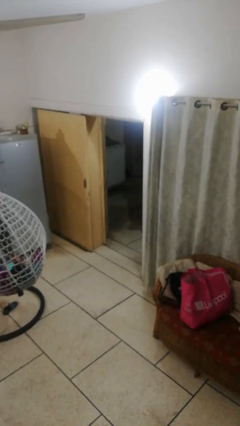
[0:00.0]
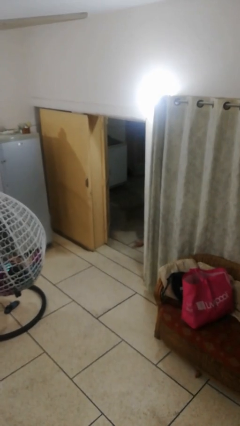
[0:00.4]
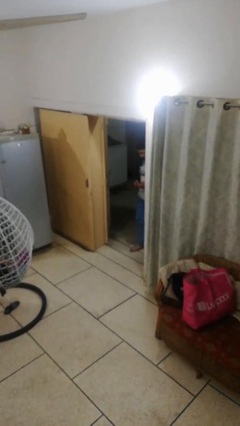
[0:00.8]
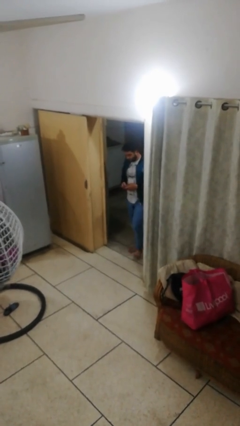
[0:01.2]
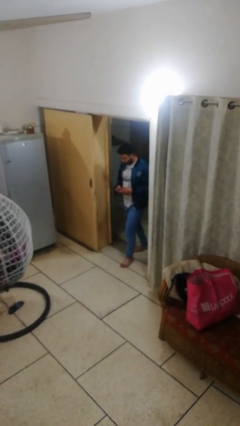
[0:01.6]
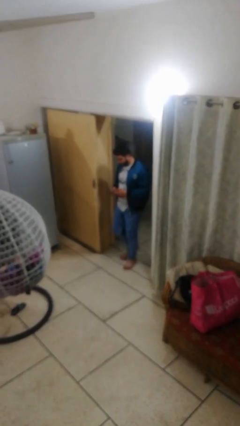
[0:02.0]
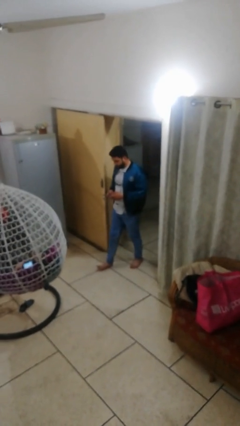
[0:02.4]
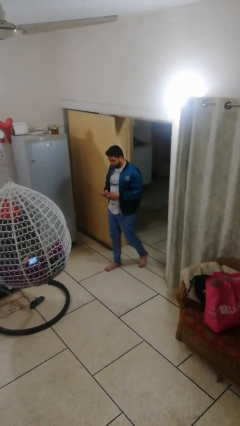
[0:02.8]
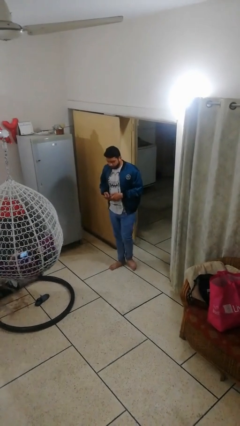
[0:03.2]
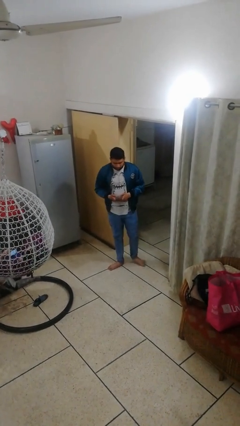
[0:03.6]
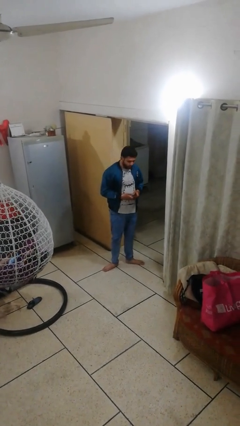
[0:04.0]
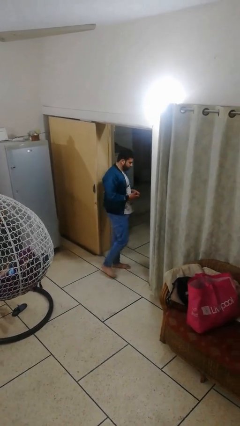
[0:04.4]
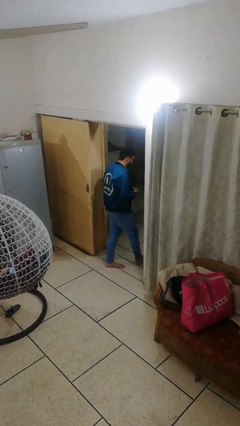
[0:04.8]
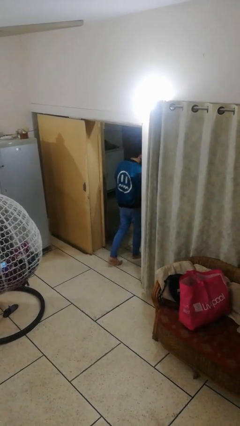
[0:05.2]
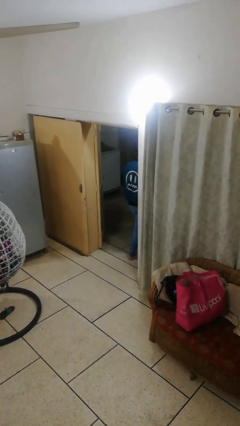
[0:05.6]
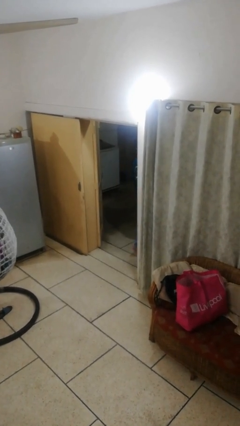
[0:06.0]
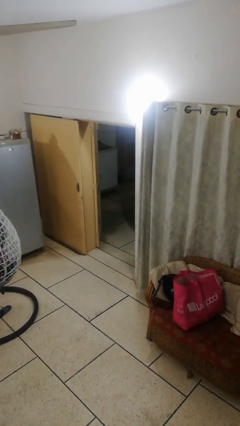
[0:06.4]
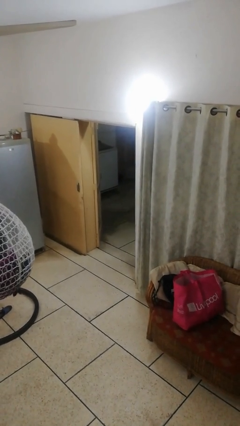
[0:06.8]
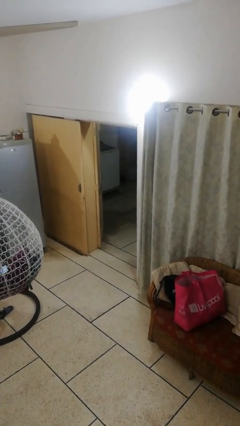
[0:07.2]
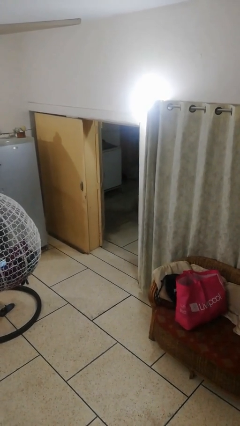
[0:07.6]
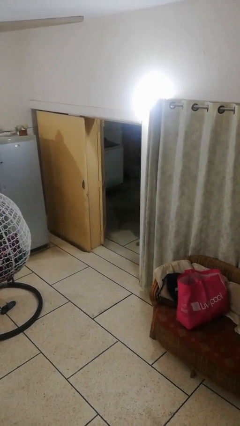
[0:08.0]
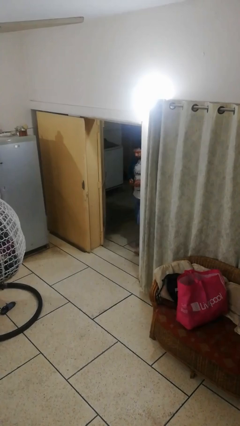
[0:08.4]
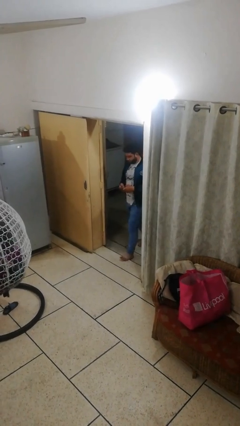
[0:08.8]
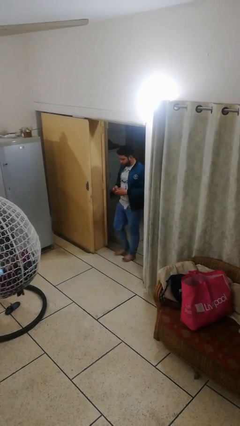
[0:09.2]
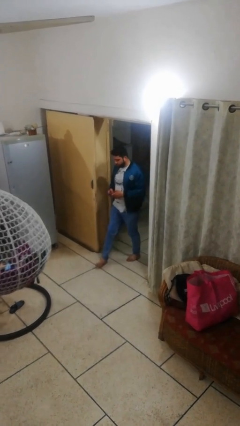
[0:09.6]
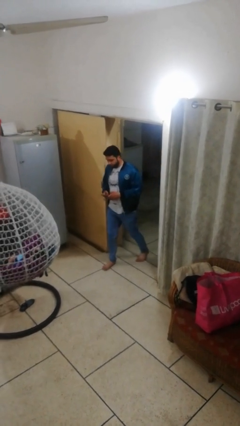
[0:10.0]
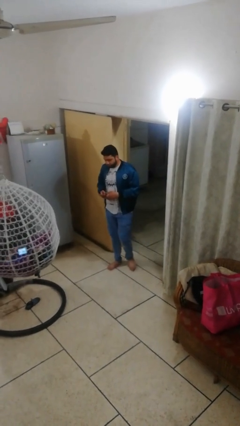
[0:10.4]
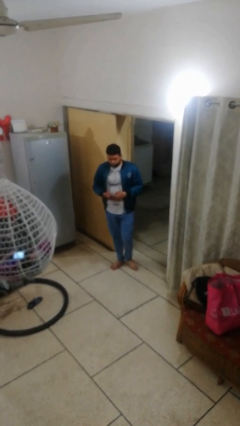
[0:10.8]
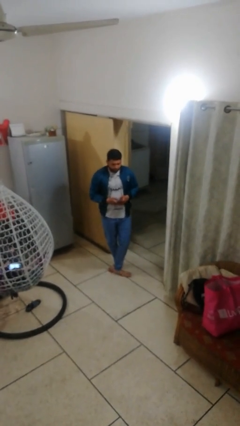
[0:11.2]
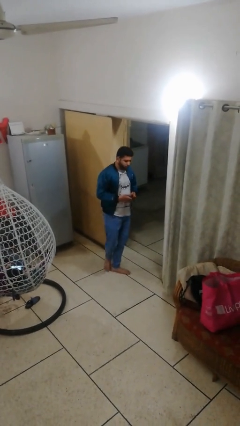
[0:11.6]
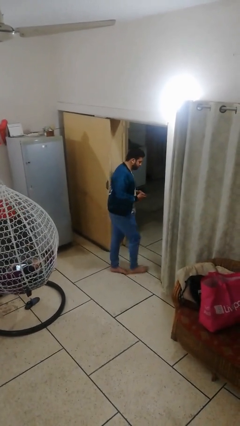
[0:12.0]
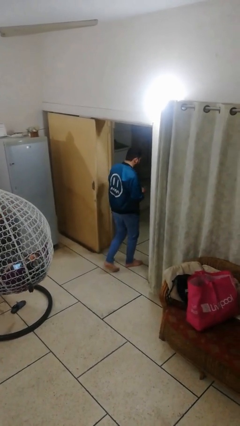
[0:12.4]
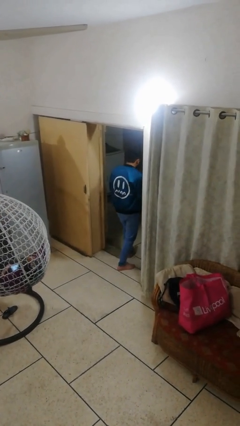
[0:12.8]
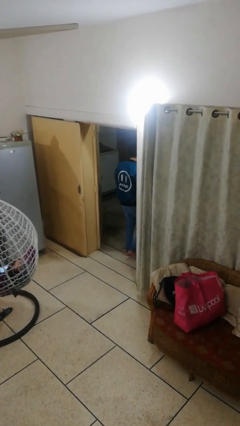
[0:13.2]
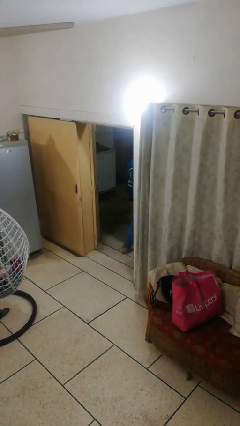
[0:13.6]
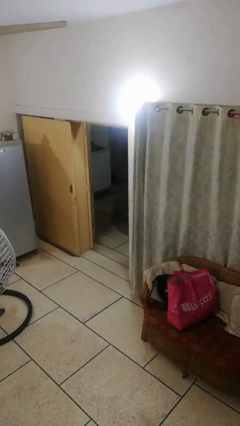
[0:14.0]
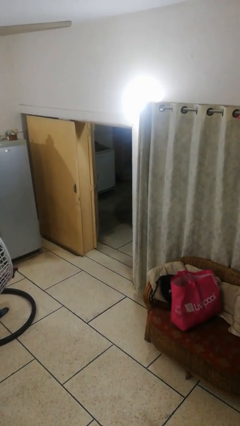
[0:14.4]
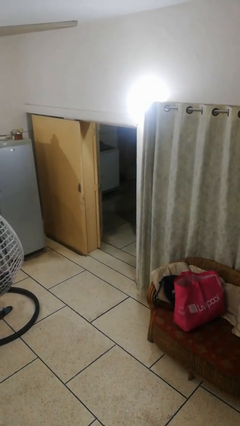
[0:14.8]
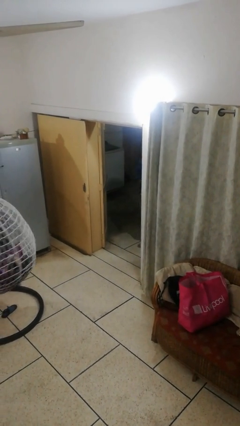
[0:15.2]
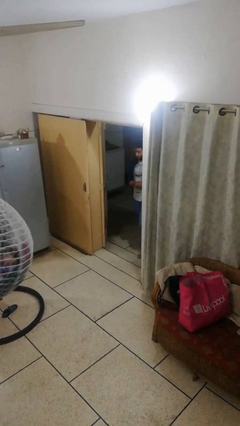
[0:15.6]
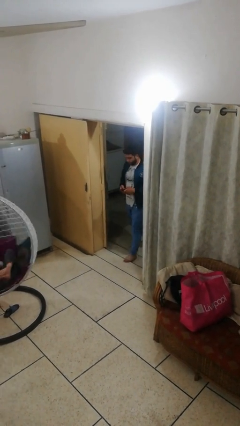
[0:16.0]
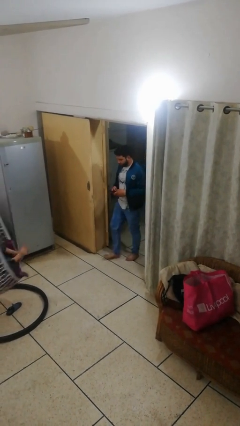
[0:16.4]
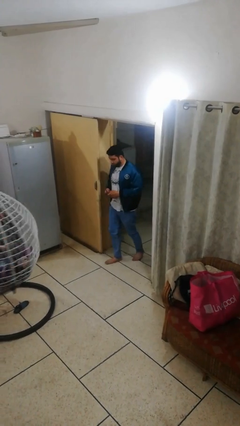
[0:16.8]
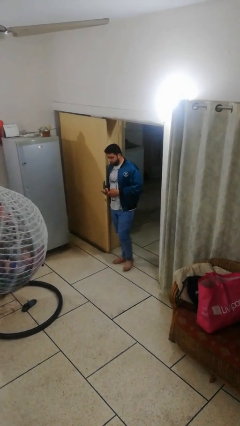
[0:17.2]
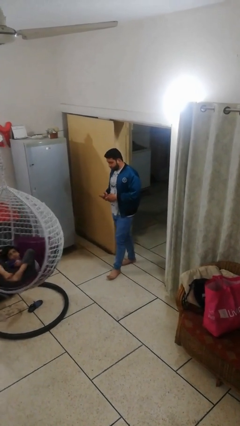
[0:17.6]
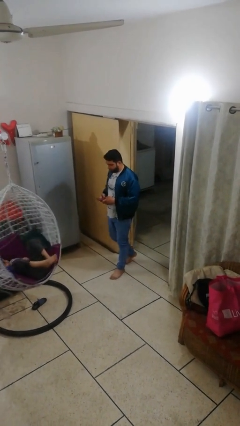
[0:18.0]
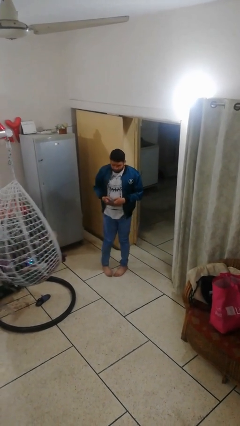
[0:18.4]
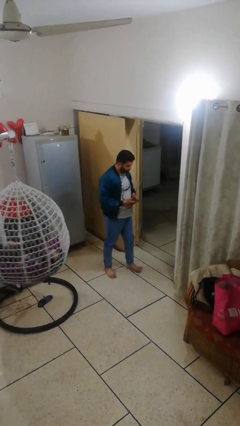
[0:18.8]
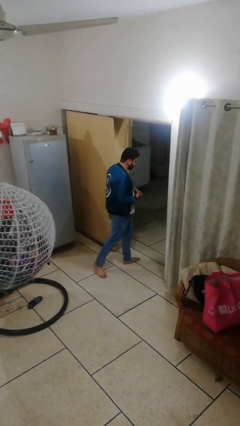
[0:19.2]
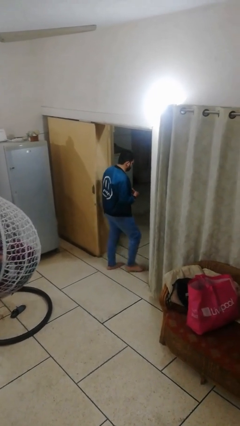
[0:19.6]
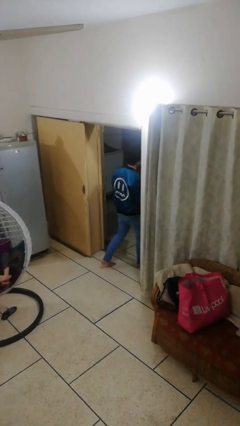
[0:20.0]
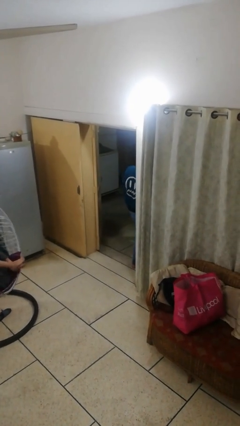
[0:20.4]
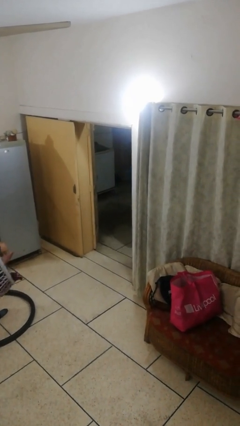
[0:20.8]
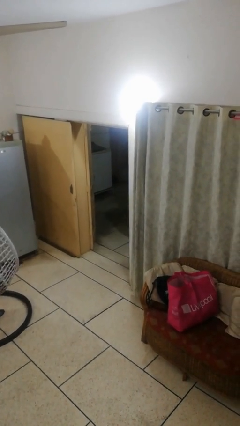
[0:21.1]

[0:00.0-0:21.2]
person texts on phone

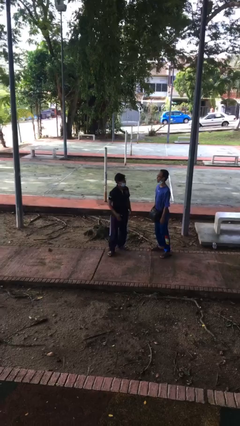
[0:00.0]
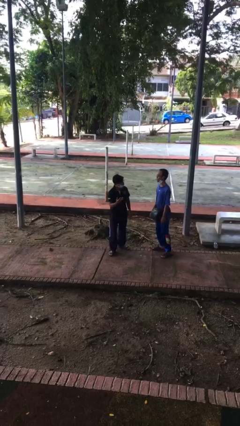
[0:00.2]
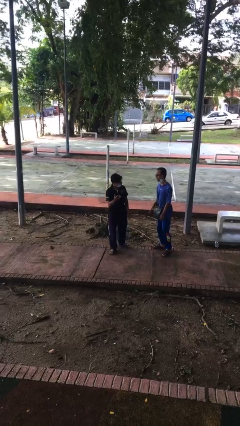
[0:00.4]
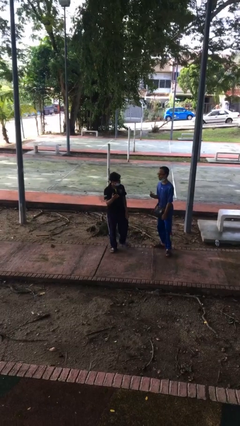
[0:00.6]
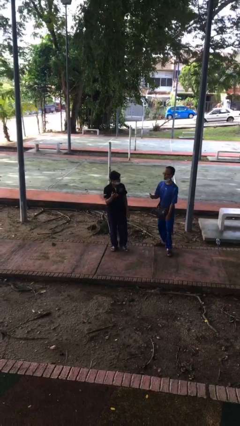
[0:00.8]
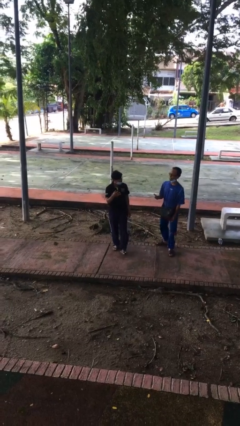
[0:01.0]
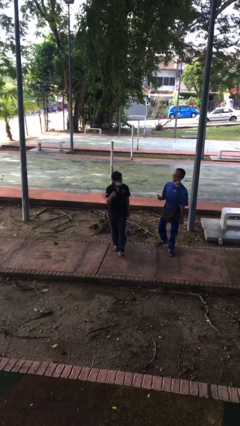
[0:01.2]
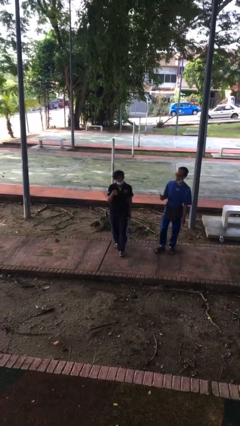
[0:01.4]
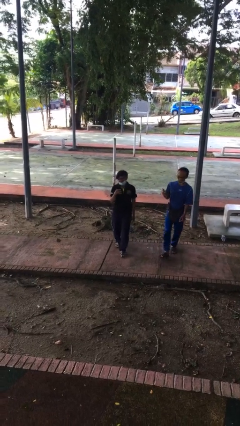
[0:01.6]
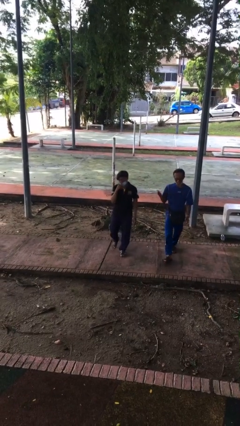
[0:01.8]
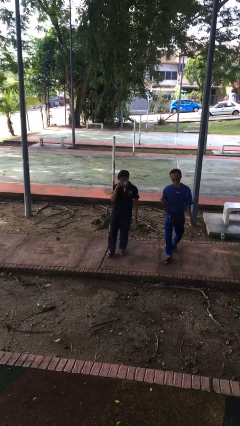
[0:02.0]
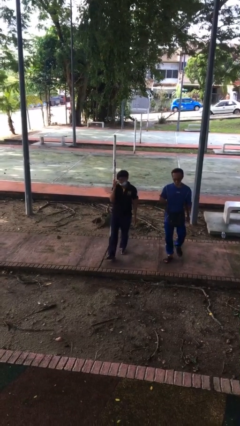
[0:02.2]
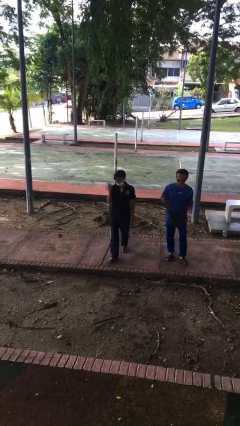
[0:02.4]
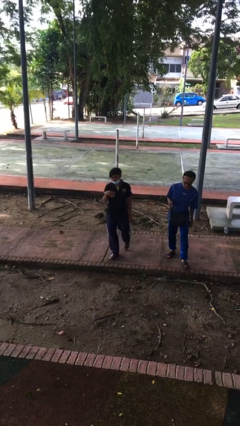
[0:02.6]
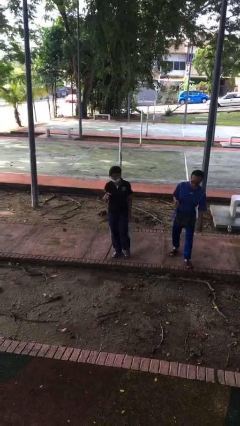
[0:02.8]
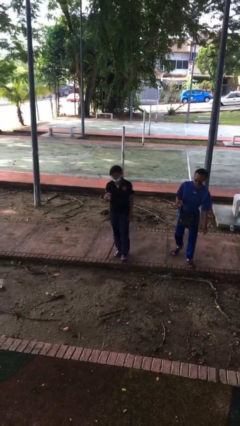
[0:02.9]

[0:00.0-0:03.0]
person talks to person

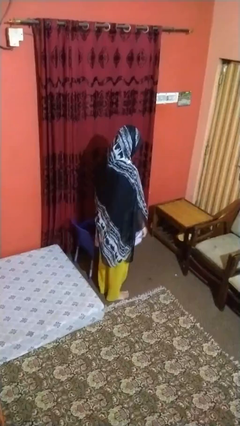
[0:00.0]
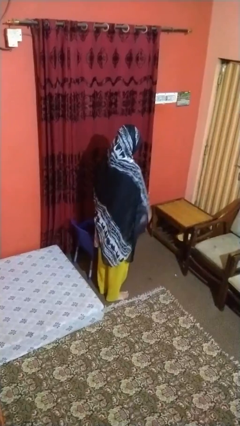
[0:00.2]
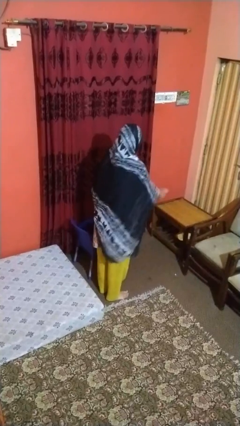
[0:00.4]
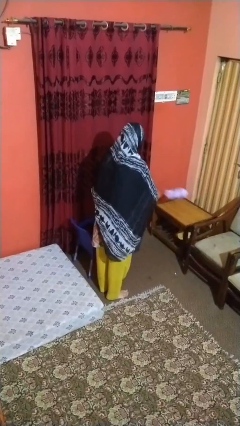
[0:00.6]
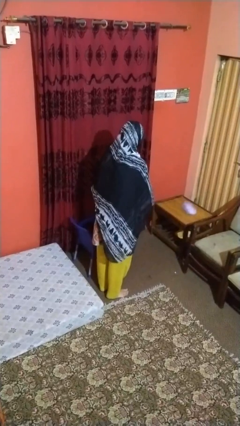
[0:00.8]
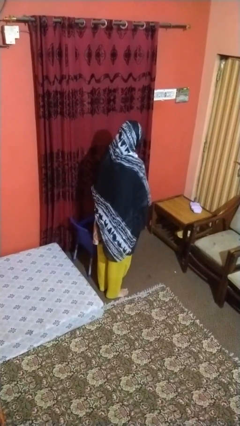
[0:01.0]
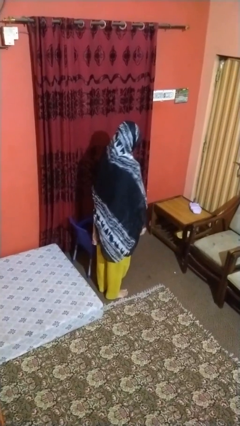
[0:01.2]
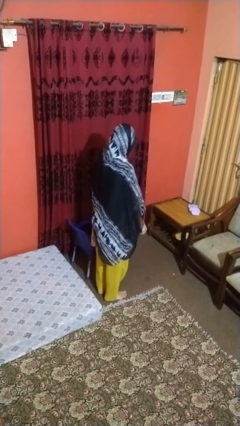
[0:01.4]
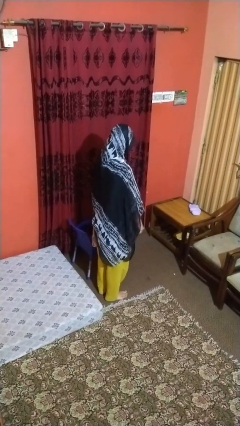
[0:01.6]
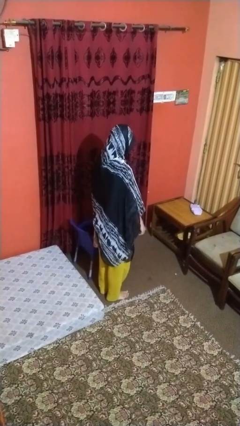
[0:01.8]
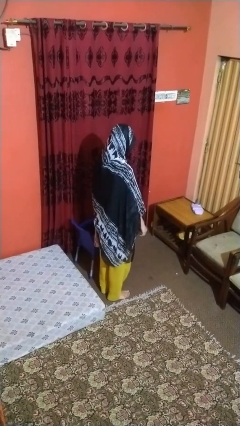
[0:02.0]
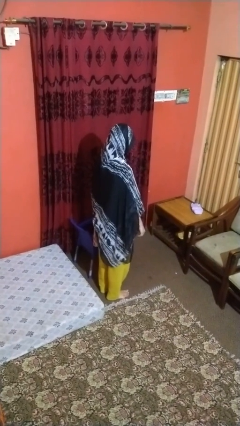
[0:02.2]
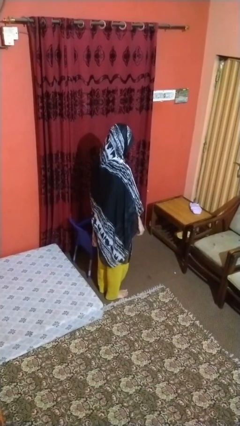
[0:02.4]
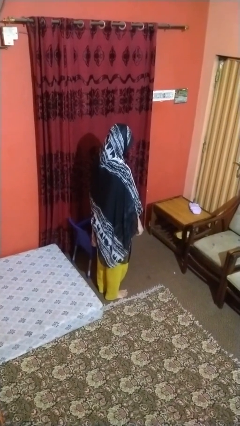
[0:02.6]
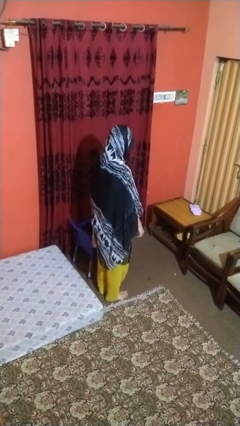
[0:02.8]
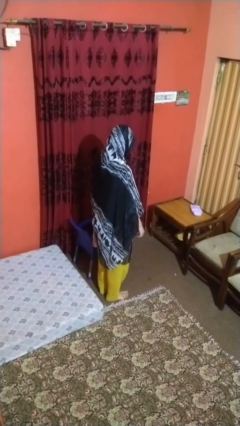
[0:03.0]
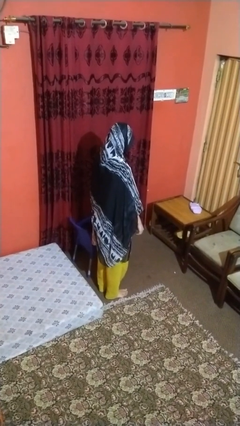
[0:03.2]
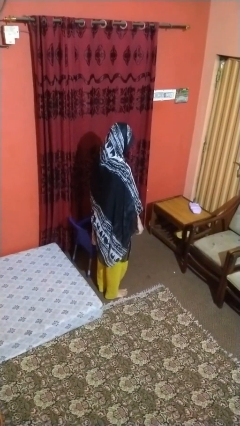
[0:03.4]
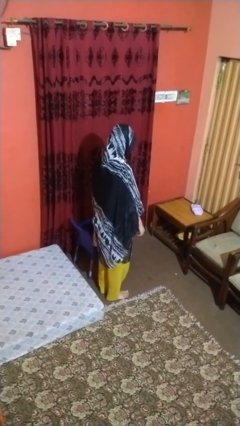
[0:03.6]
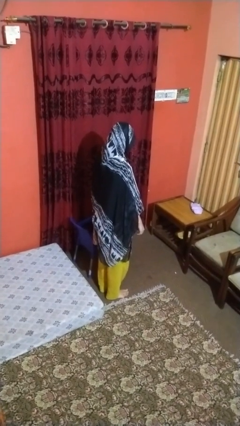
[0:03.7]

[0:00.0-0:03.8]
person throws object on table

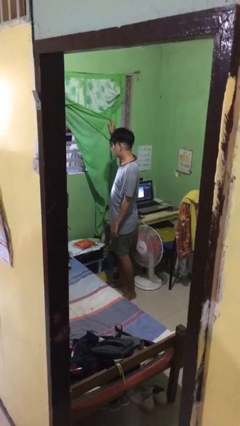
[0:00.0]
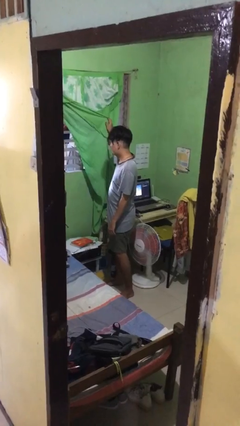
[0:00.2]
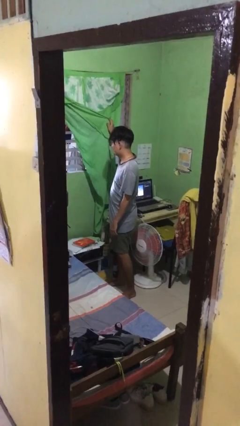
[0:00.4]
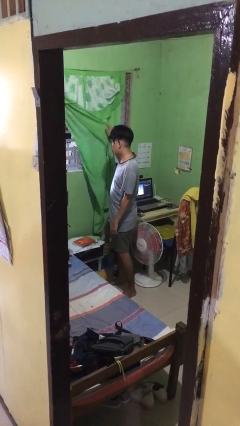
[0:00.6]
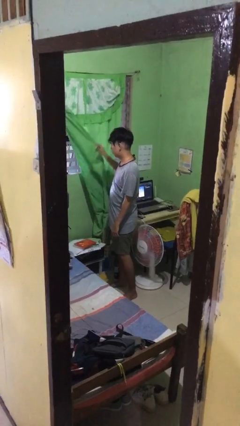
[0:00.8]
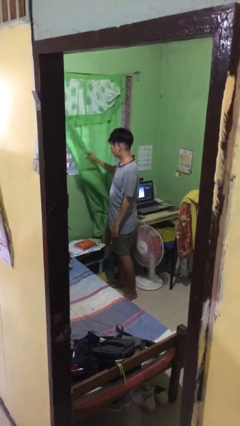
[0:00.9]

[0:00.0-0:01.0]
person closes curtains
